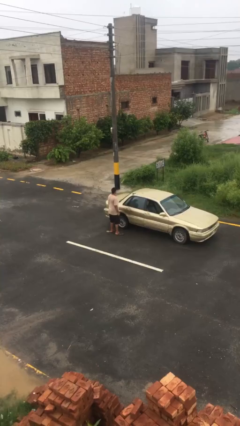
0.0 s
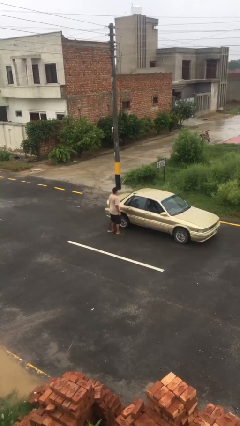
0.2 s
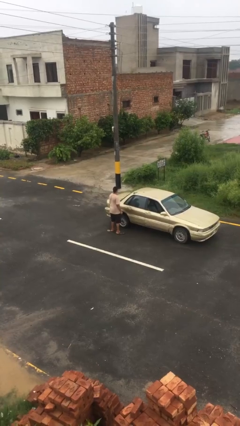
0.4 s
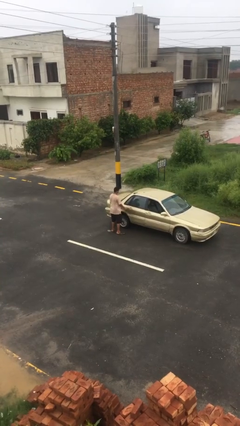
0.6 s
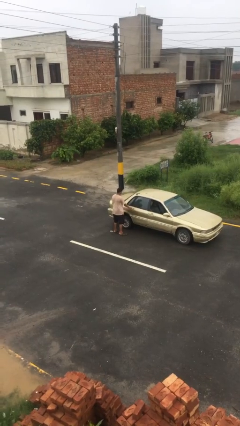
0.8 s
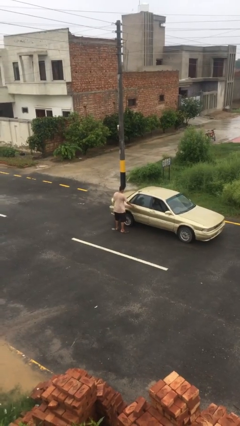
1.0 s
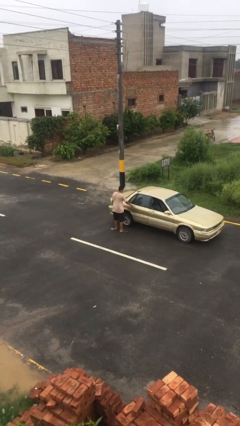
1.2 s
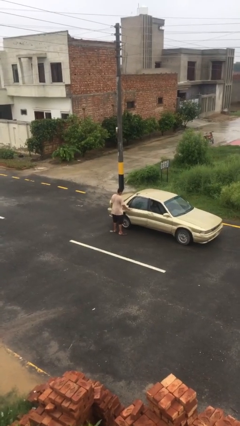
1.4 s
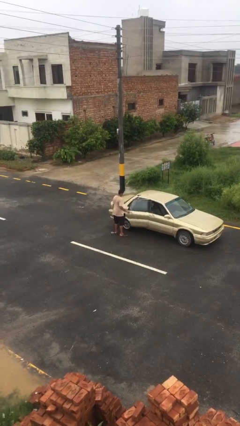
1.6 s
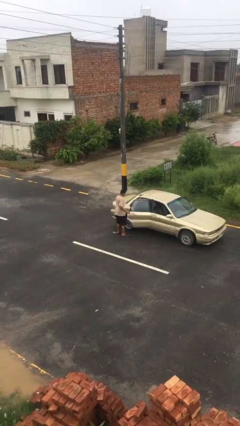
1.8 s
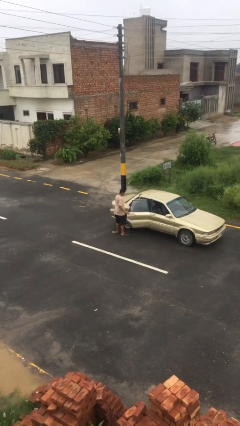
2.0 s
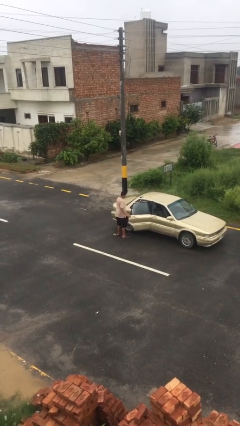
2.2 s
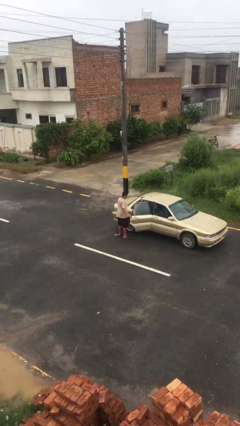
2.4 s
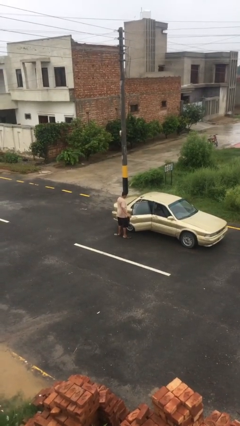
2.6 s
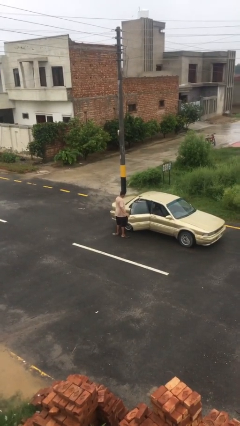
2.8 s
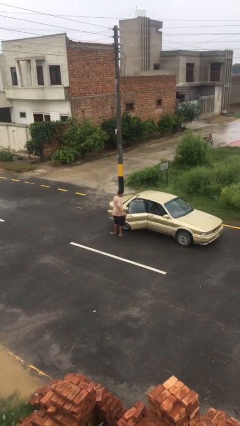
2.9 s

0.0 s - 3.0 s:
person opens car door

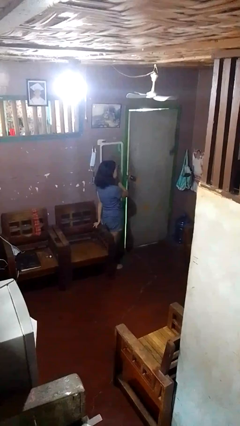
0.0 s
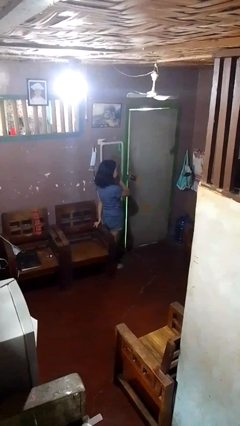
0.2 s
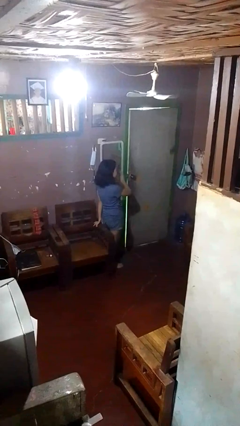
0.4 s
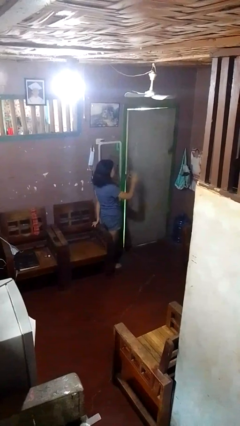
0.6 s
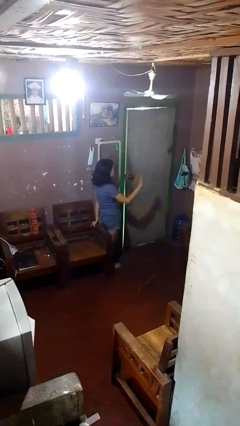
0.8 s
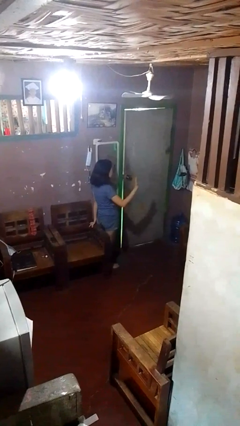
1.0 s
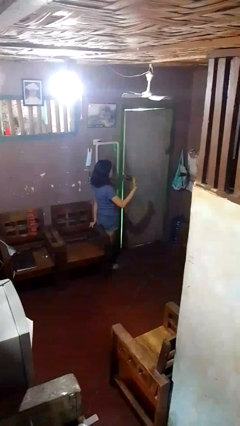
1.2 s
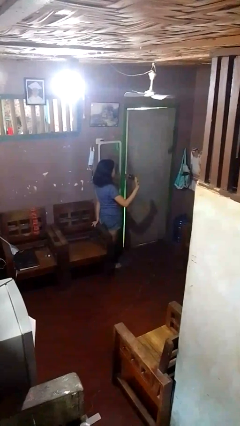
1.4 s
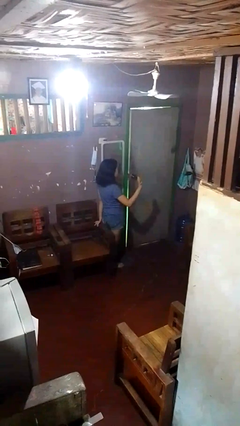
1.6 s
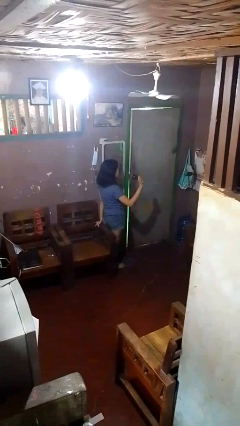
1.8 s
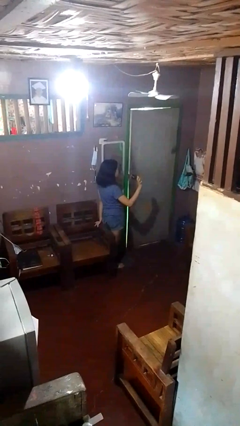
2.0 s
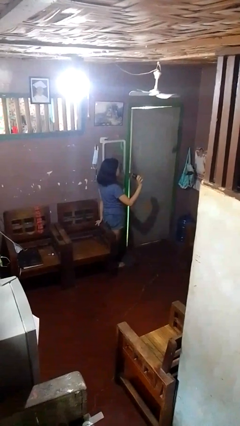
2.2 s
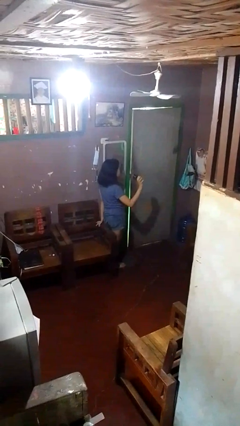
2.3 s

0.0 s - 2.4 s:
person gestures swipe right

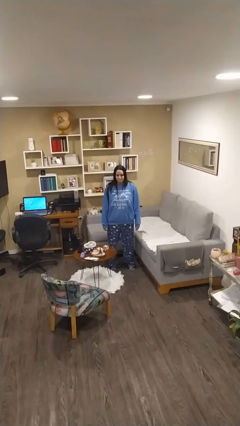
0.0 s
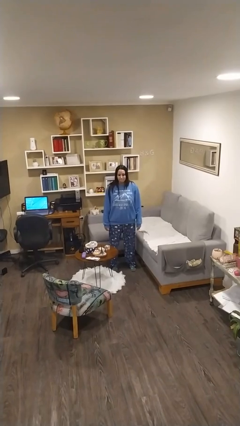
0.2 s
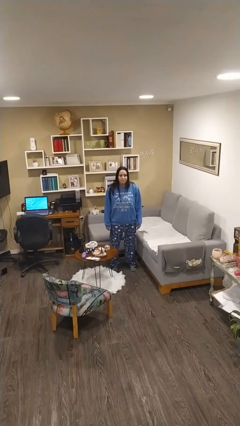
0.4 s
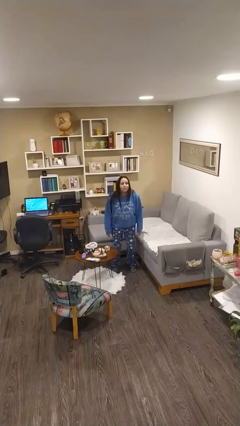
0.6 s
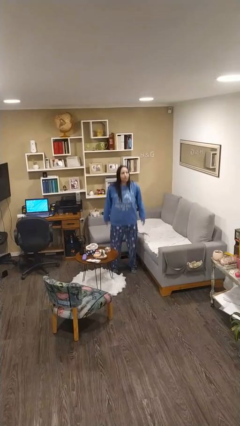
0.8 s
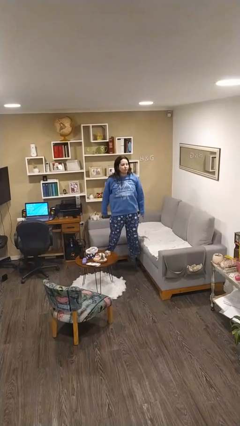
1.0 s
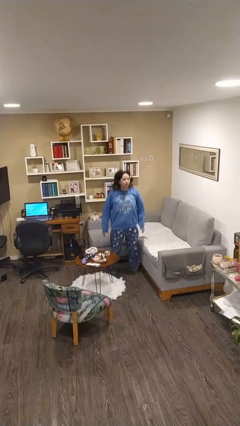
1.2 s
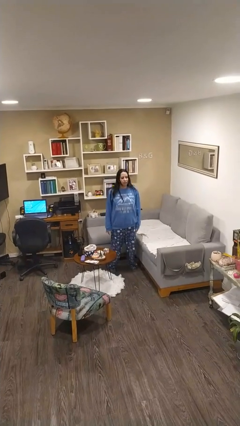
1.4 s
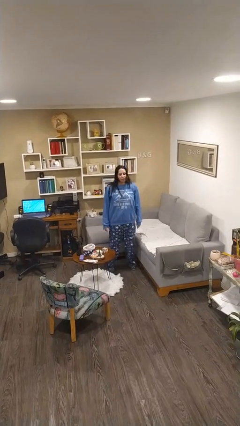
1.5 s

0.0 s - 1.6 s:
person jumps

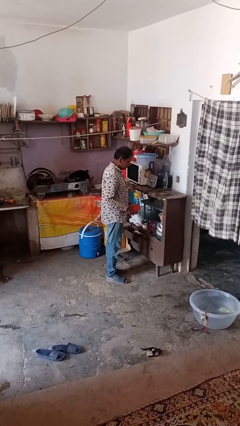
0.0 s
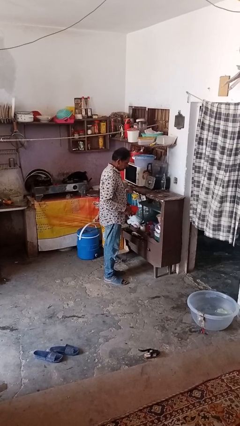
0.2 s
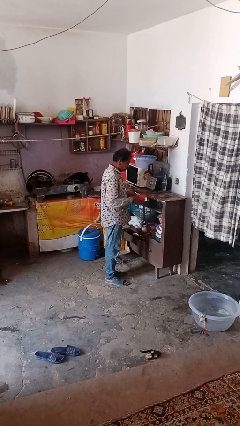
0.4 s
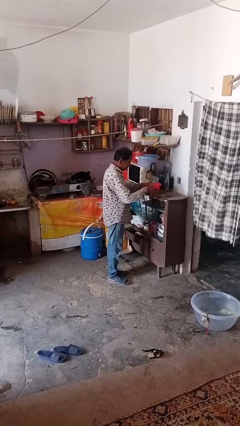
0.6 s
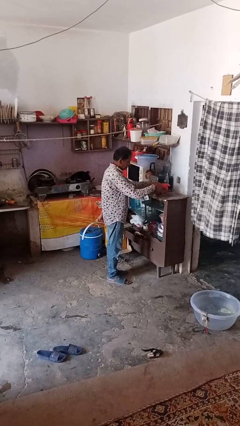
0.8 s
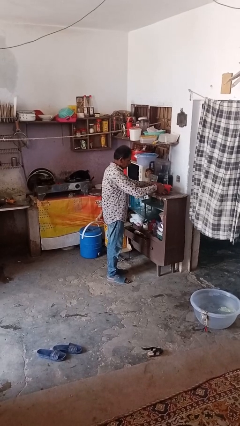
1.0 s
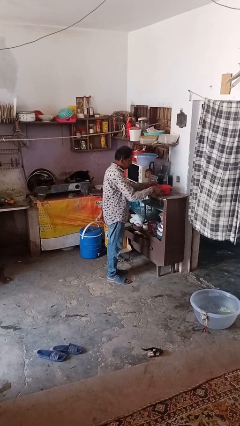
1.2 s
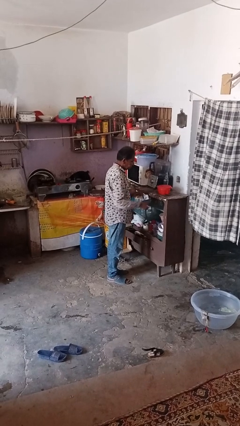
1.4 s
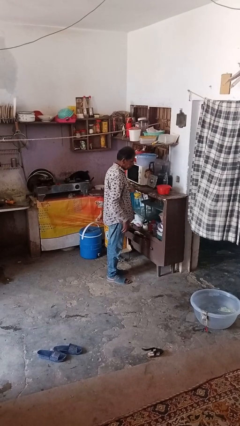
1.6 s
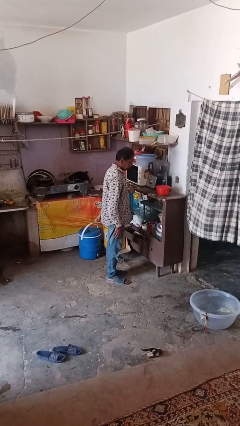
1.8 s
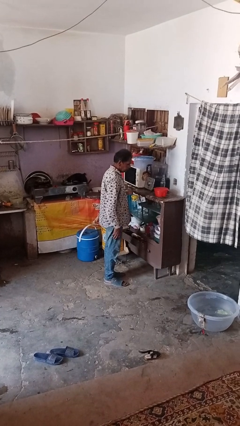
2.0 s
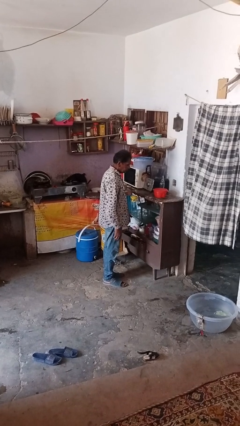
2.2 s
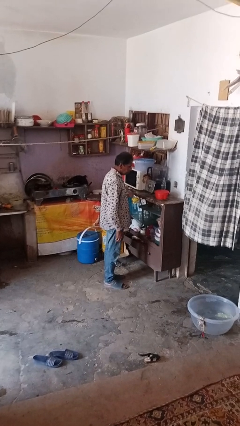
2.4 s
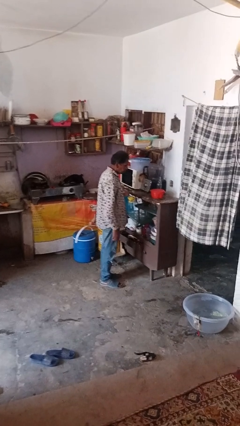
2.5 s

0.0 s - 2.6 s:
person puts down object on countertop

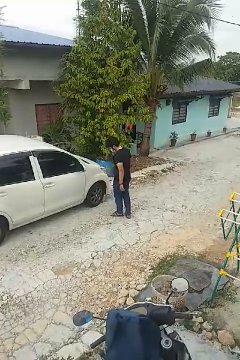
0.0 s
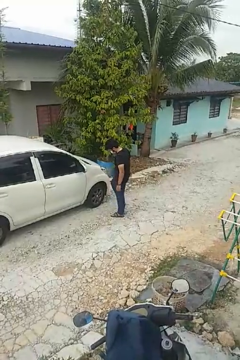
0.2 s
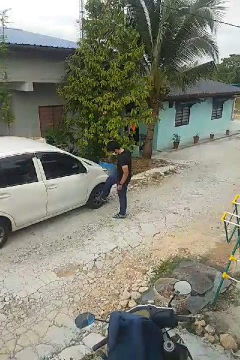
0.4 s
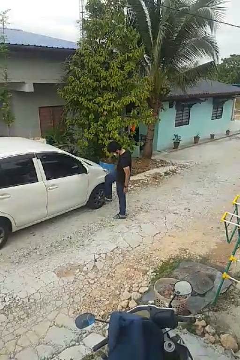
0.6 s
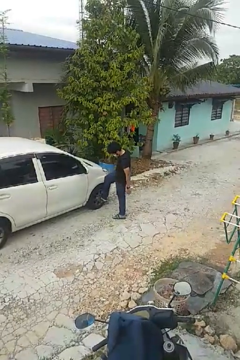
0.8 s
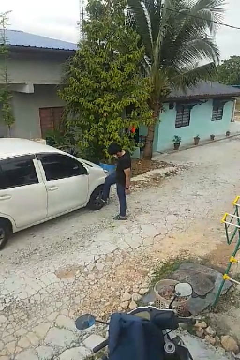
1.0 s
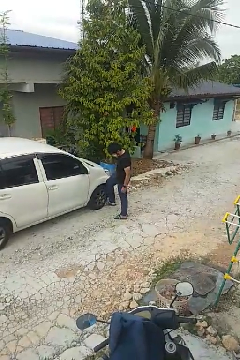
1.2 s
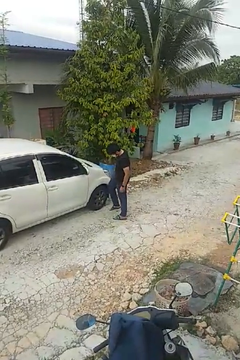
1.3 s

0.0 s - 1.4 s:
person kicks car tires

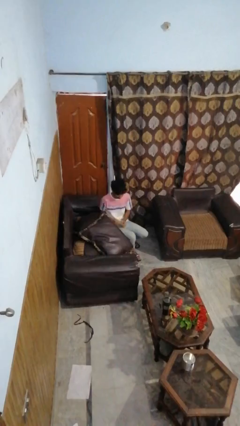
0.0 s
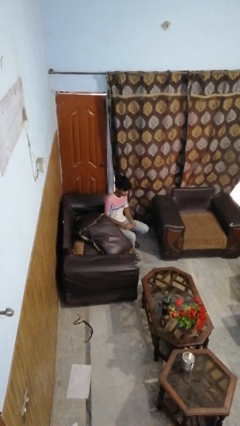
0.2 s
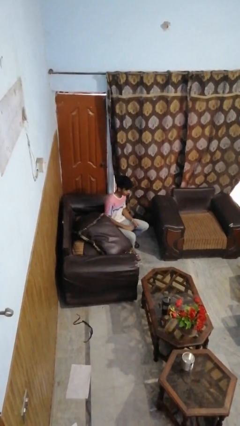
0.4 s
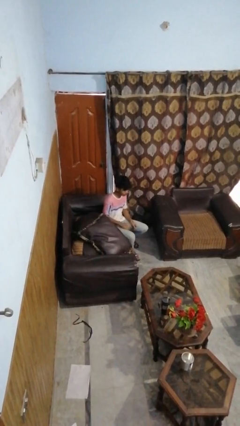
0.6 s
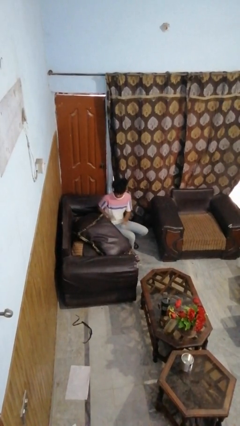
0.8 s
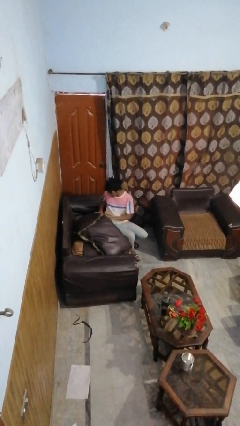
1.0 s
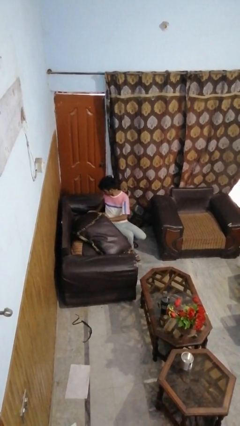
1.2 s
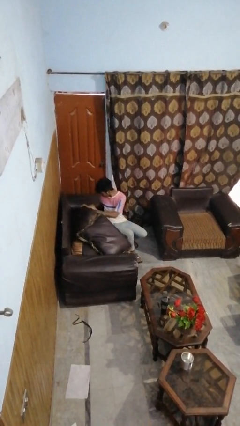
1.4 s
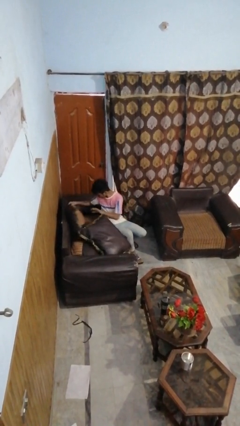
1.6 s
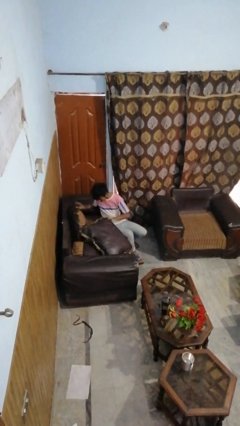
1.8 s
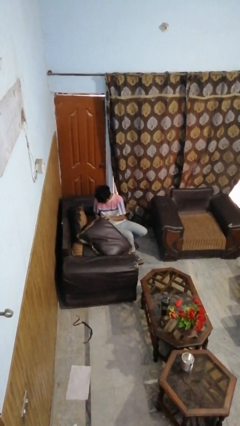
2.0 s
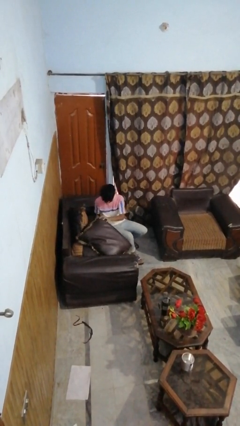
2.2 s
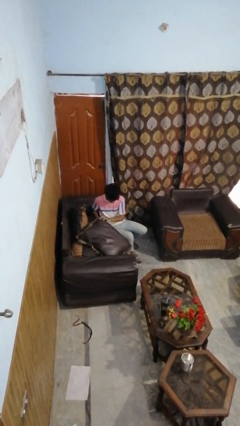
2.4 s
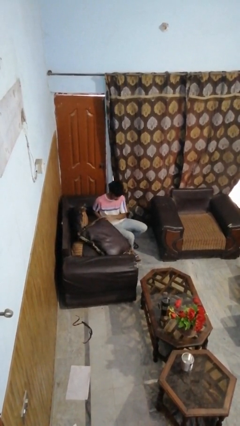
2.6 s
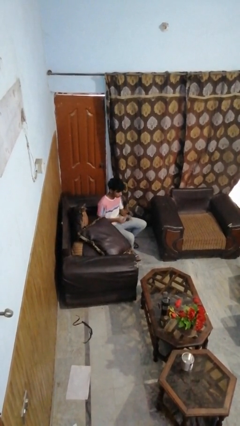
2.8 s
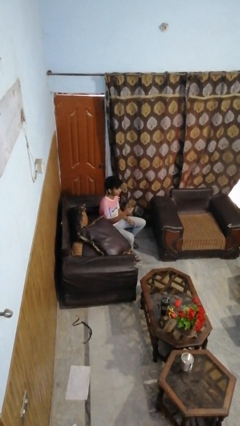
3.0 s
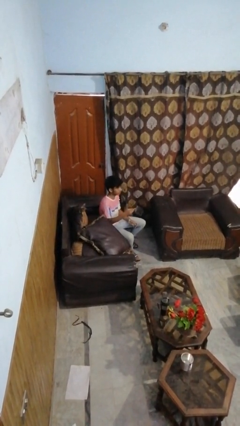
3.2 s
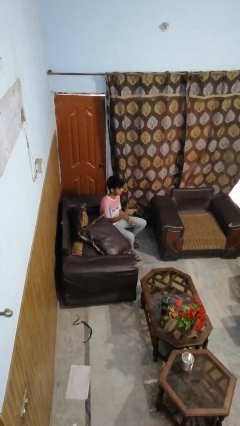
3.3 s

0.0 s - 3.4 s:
person searches in couch

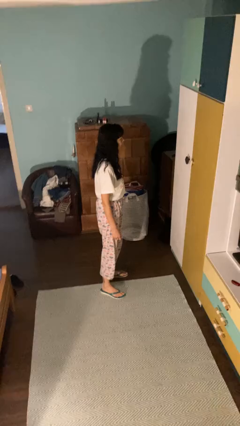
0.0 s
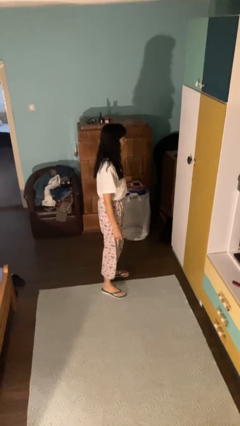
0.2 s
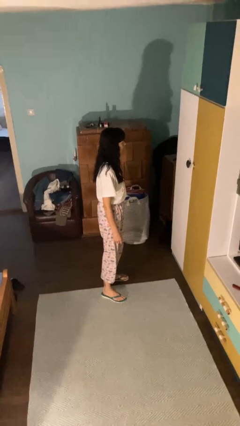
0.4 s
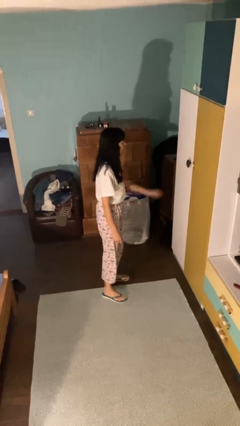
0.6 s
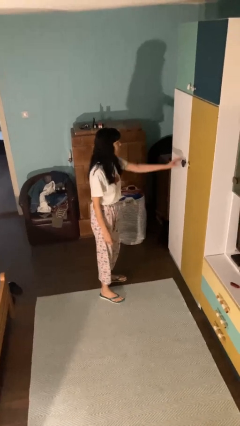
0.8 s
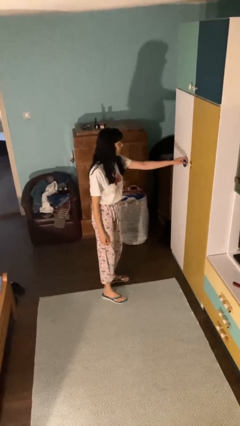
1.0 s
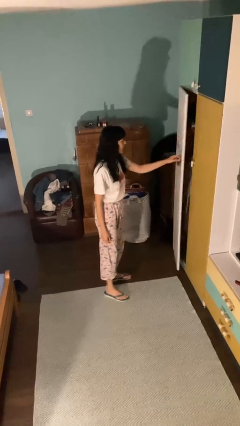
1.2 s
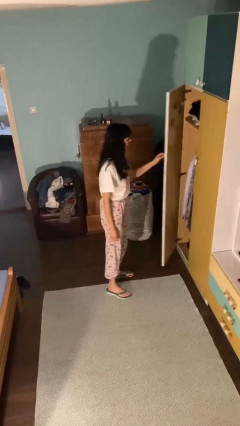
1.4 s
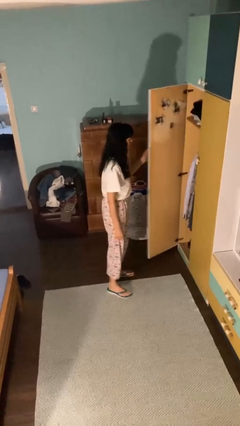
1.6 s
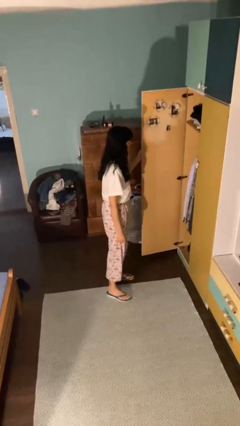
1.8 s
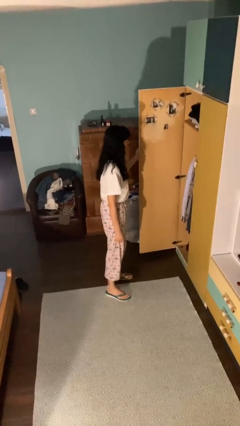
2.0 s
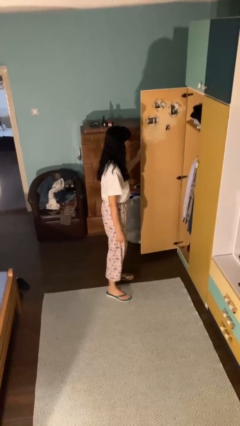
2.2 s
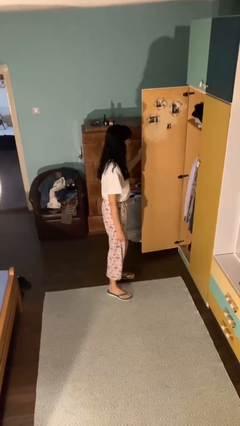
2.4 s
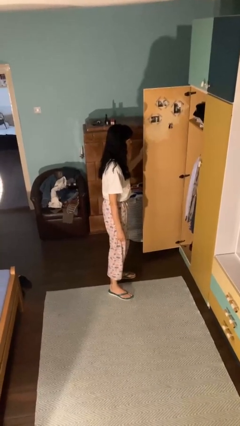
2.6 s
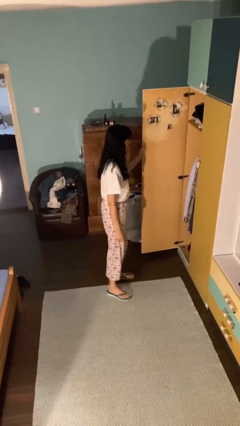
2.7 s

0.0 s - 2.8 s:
person opens closet door

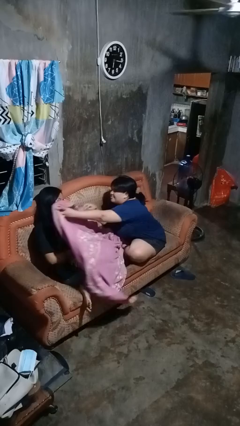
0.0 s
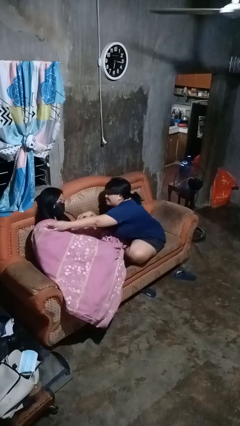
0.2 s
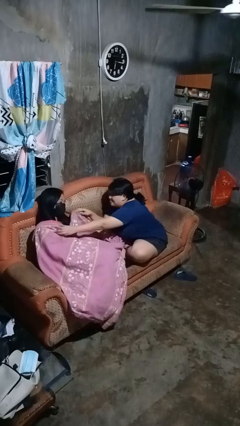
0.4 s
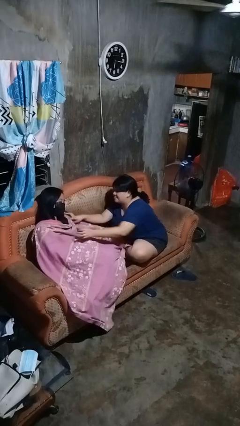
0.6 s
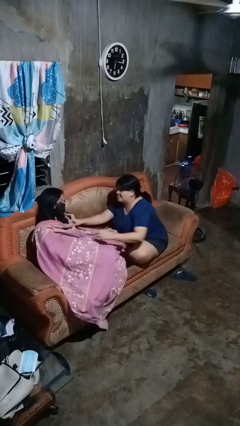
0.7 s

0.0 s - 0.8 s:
person covers friend with blanket
